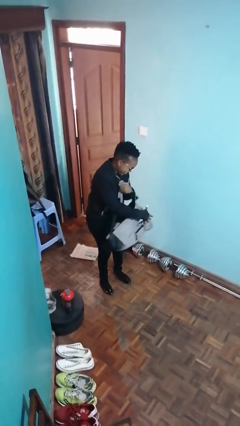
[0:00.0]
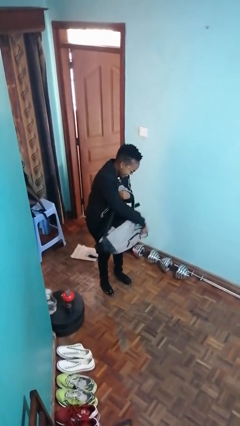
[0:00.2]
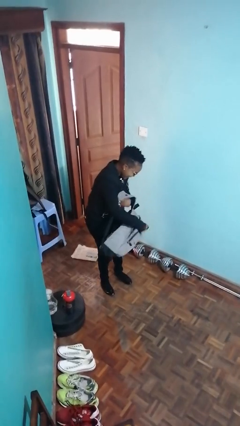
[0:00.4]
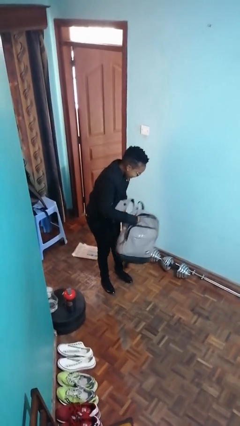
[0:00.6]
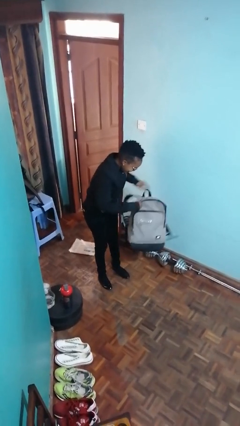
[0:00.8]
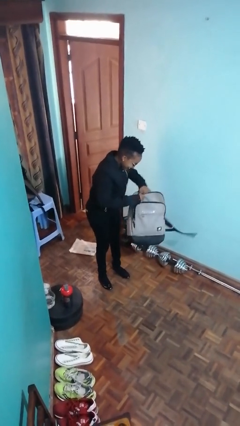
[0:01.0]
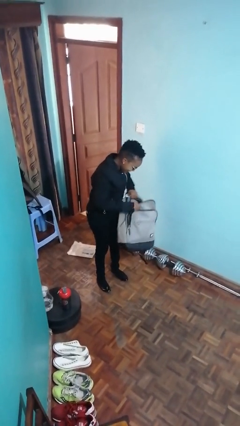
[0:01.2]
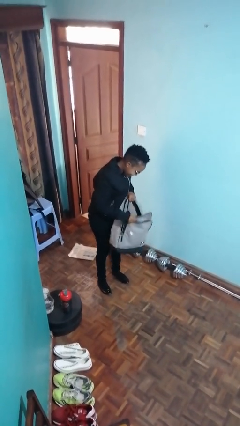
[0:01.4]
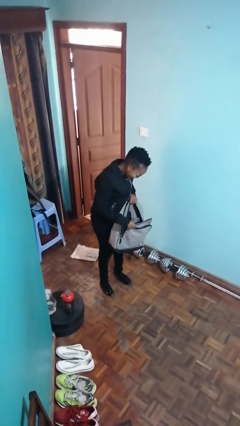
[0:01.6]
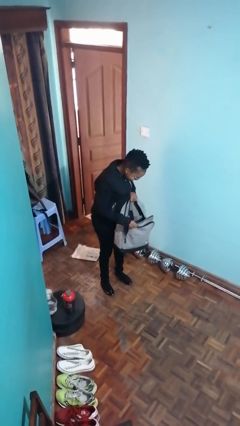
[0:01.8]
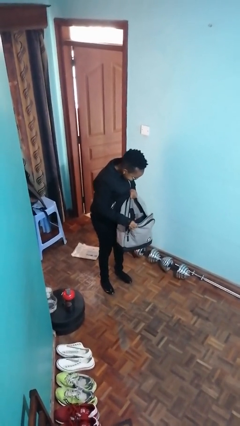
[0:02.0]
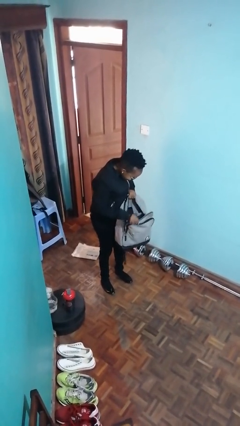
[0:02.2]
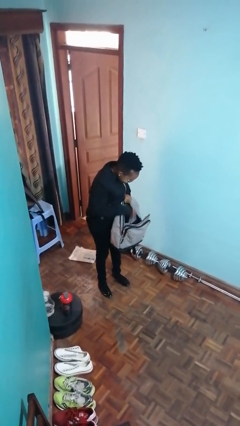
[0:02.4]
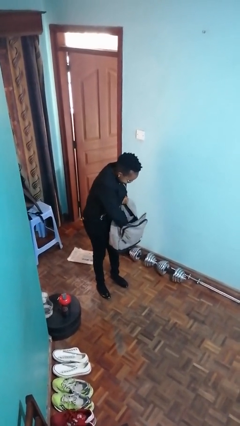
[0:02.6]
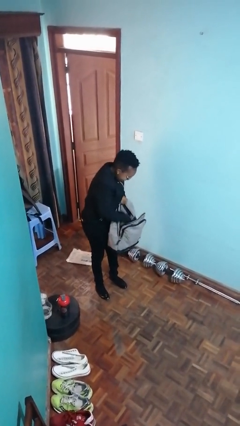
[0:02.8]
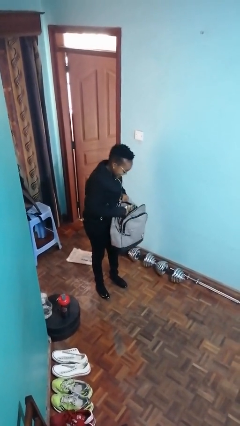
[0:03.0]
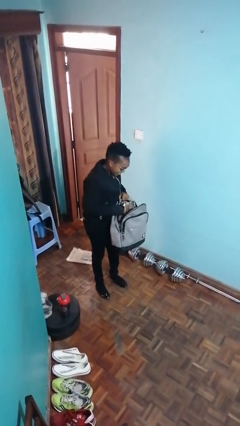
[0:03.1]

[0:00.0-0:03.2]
person searches in backpack

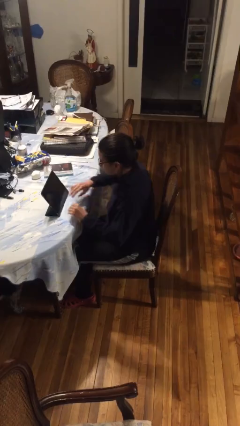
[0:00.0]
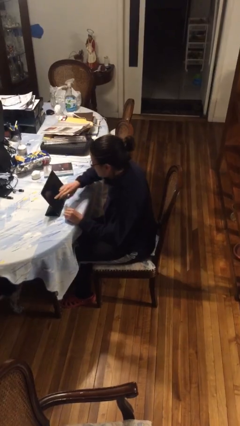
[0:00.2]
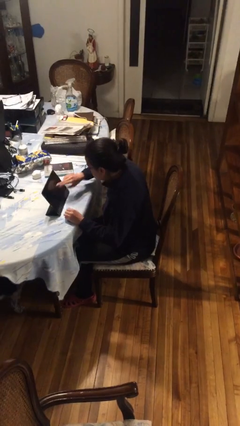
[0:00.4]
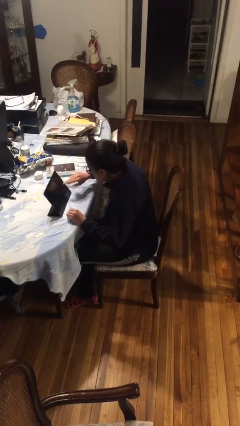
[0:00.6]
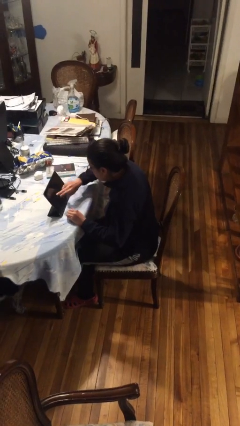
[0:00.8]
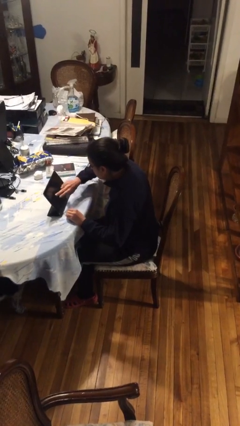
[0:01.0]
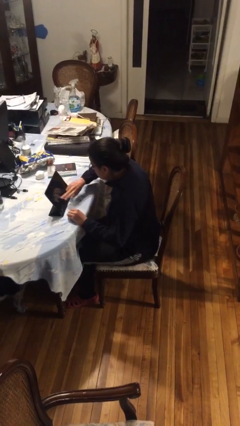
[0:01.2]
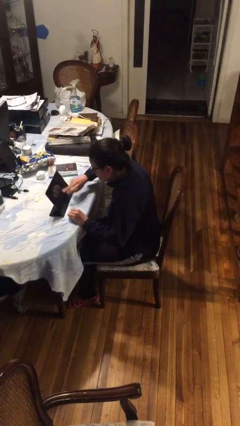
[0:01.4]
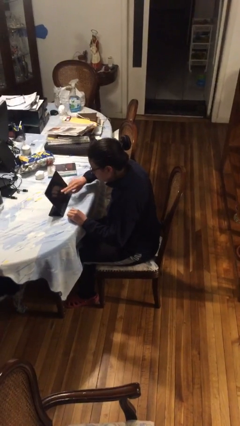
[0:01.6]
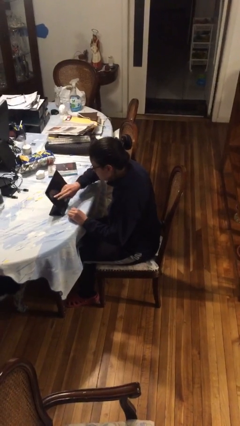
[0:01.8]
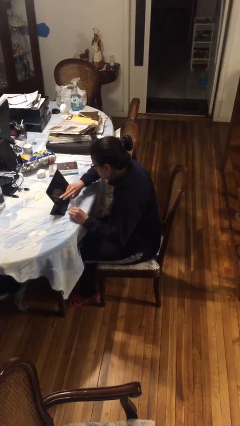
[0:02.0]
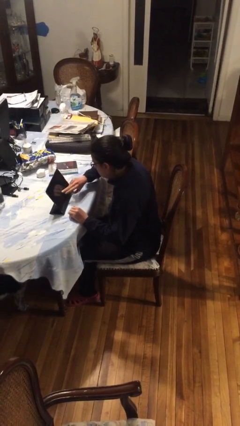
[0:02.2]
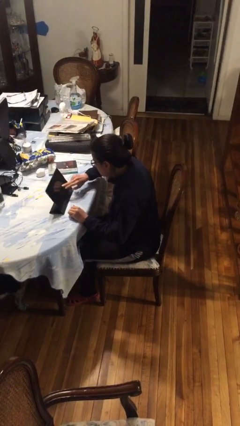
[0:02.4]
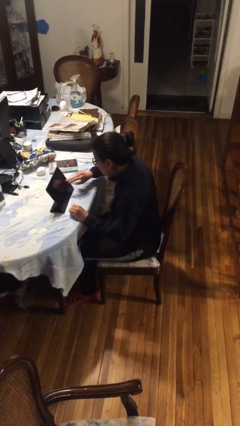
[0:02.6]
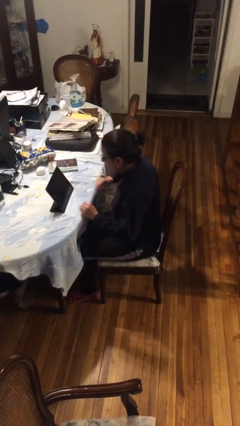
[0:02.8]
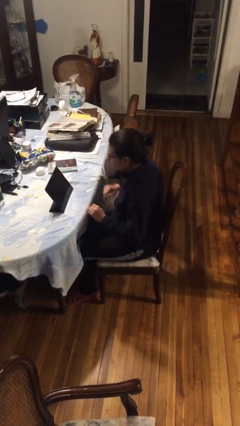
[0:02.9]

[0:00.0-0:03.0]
person interacts with tablet

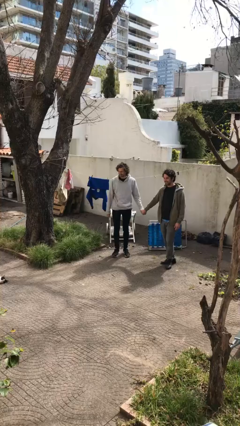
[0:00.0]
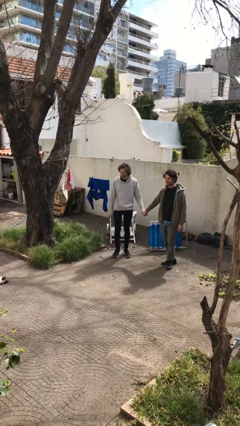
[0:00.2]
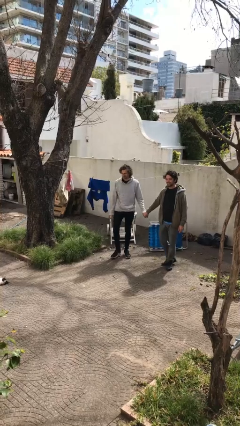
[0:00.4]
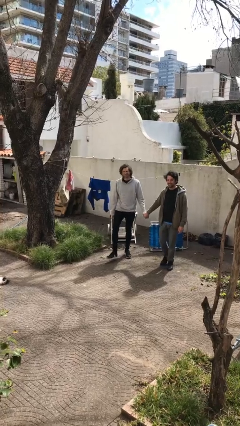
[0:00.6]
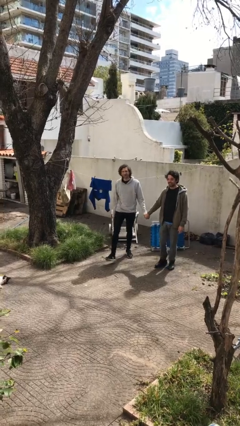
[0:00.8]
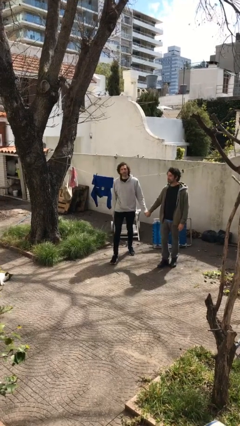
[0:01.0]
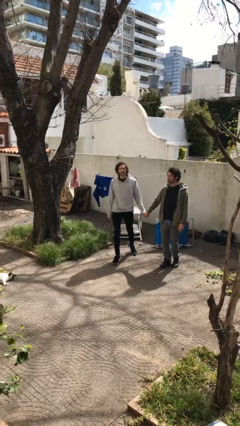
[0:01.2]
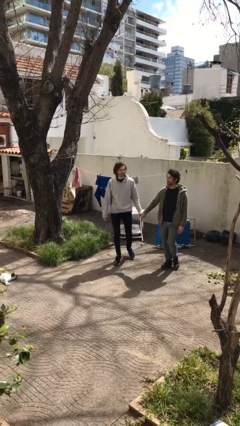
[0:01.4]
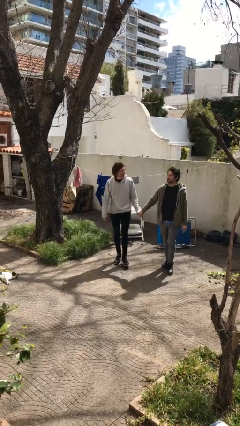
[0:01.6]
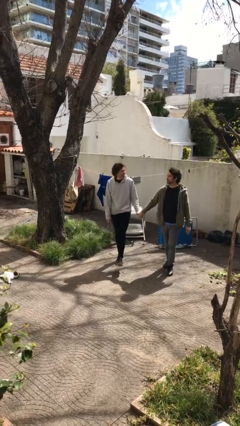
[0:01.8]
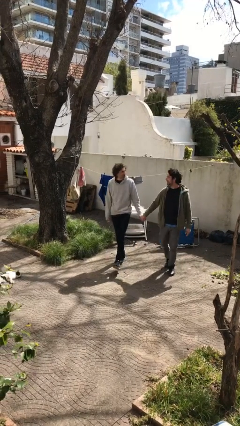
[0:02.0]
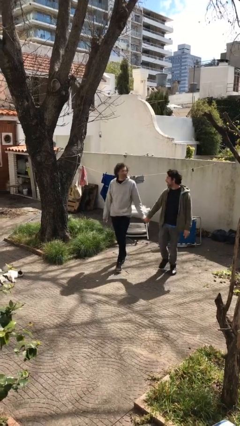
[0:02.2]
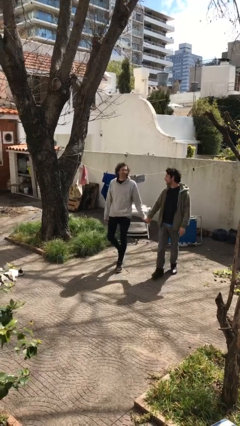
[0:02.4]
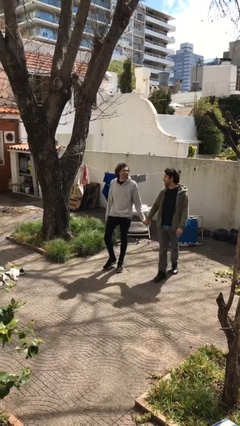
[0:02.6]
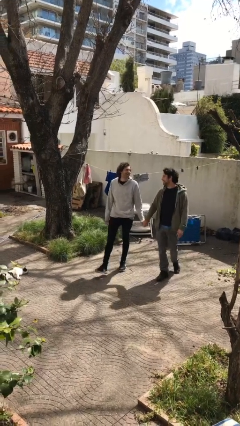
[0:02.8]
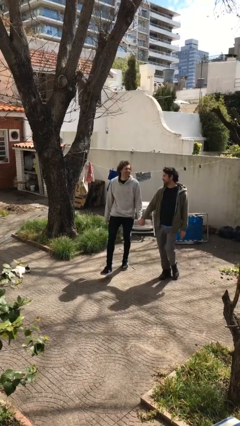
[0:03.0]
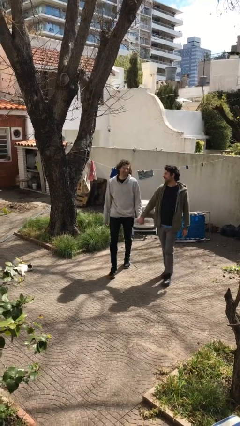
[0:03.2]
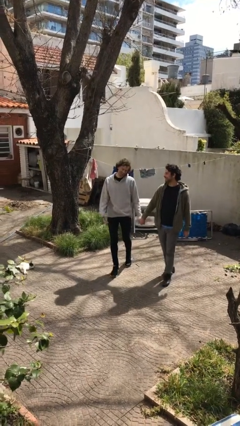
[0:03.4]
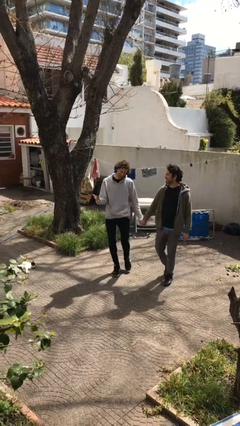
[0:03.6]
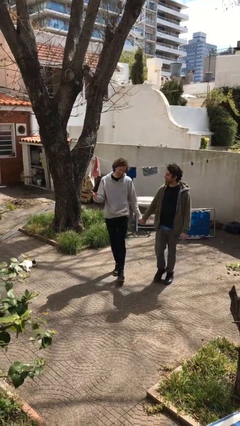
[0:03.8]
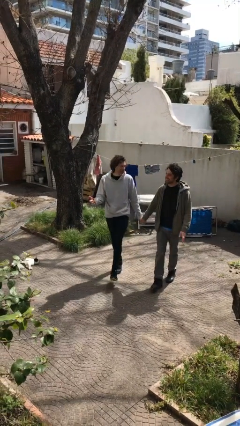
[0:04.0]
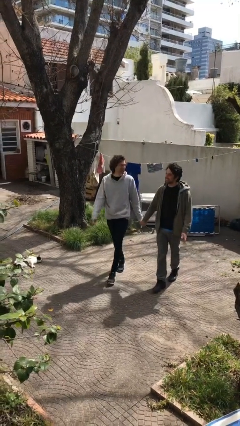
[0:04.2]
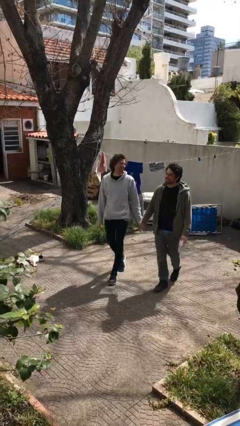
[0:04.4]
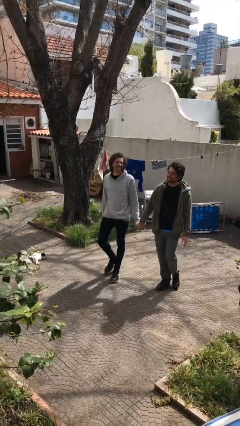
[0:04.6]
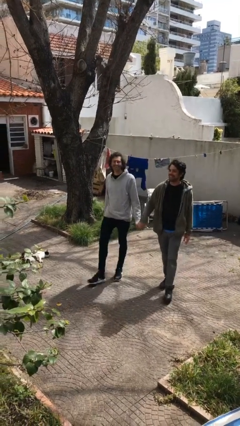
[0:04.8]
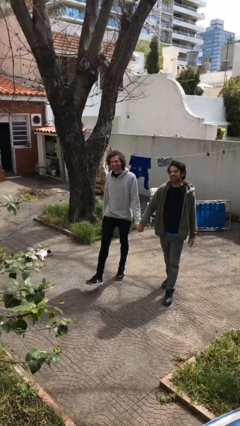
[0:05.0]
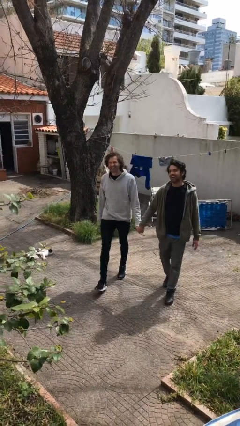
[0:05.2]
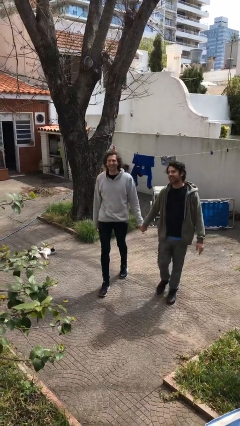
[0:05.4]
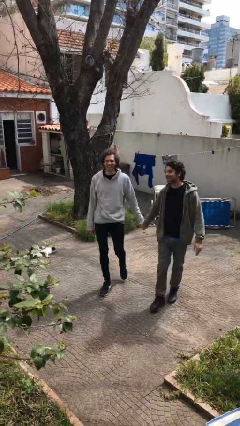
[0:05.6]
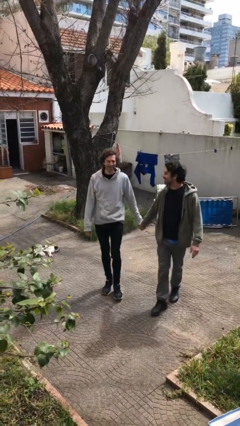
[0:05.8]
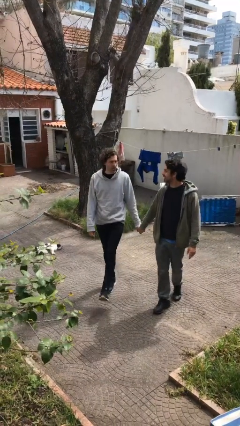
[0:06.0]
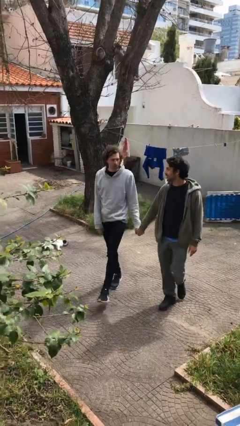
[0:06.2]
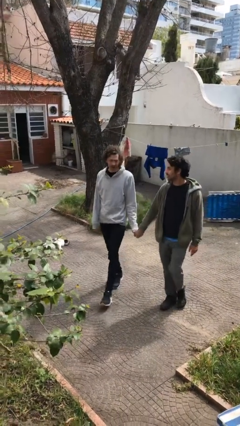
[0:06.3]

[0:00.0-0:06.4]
person holds hand

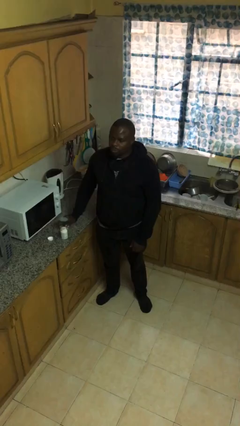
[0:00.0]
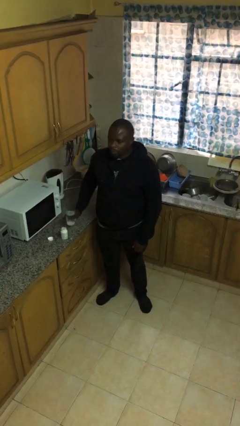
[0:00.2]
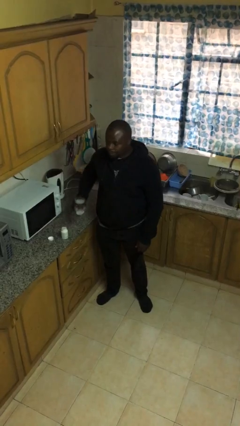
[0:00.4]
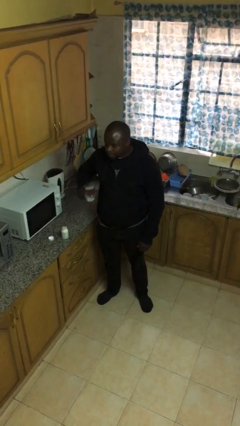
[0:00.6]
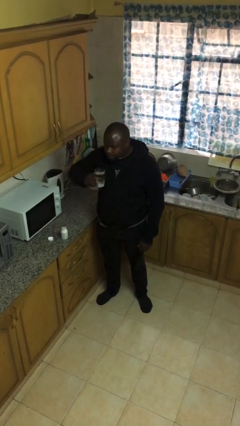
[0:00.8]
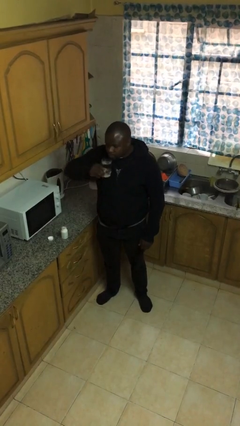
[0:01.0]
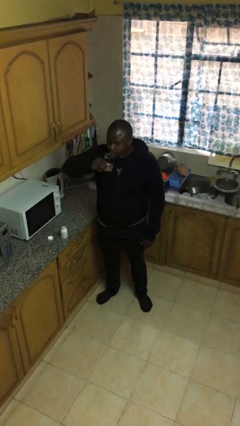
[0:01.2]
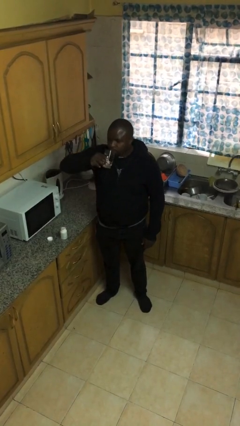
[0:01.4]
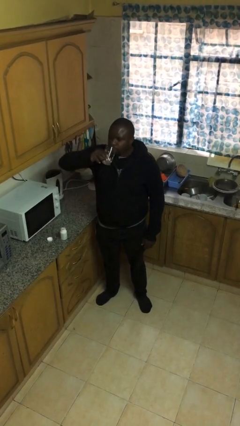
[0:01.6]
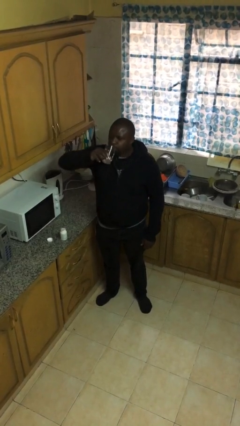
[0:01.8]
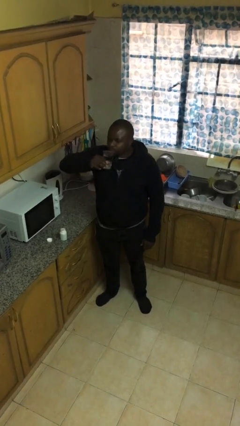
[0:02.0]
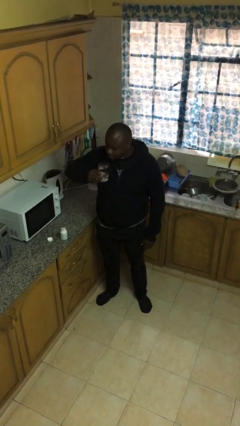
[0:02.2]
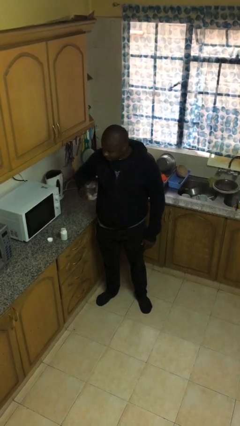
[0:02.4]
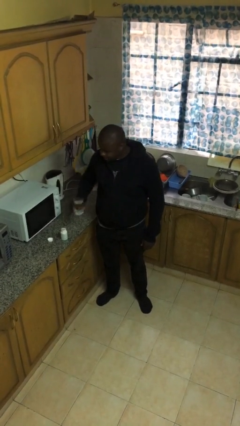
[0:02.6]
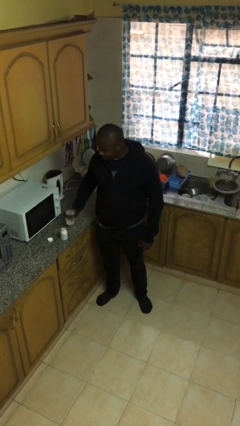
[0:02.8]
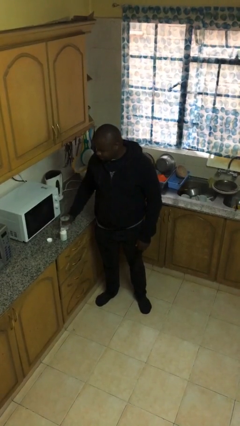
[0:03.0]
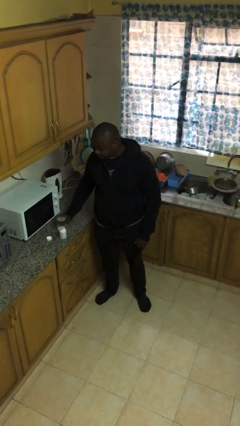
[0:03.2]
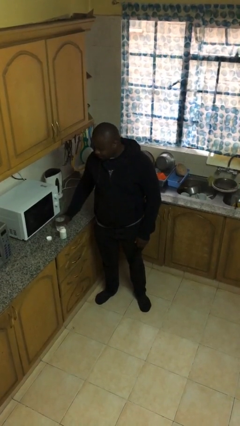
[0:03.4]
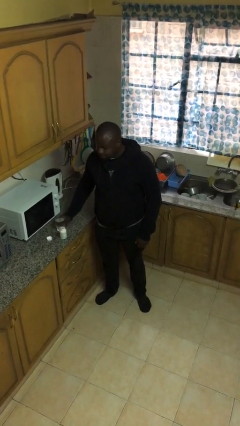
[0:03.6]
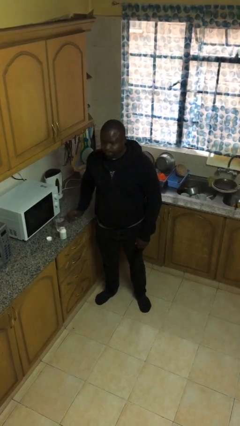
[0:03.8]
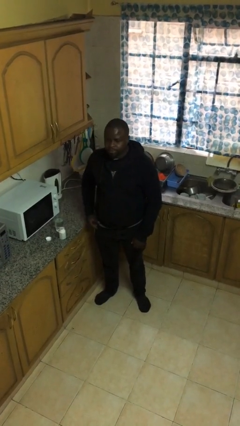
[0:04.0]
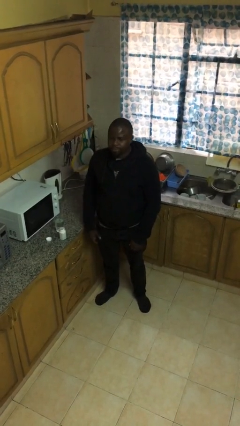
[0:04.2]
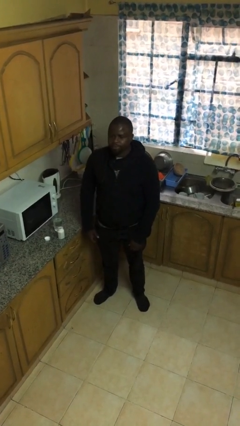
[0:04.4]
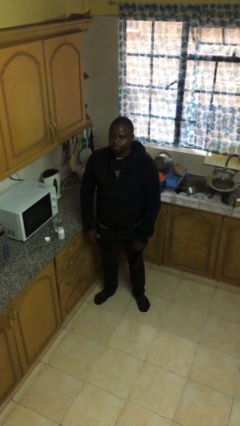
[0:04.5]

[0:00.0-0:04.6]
person drinks from cup

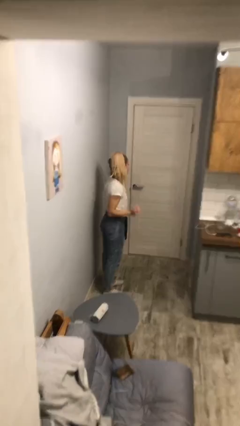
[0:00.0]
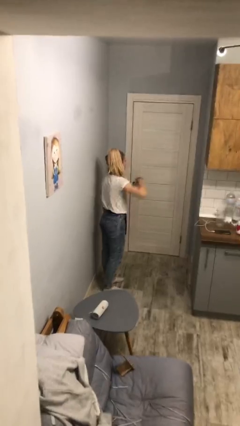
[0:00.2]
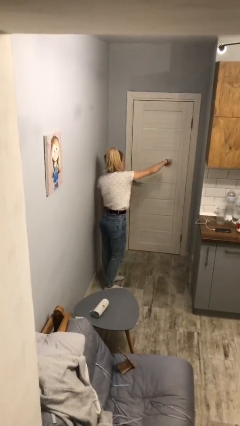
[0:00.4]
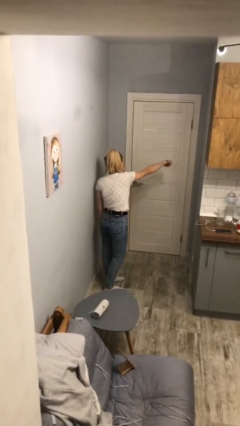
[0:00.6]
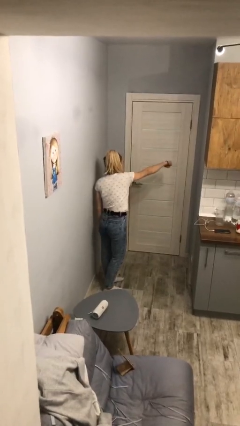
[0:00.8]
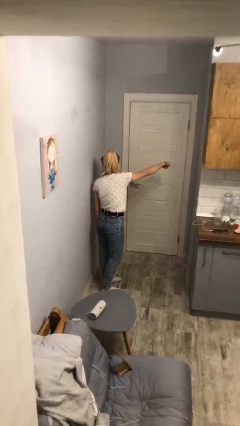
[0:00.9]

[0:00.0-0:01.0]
person punches
